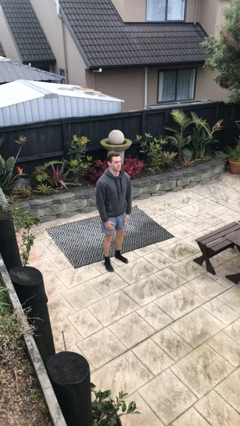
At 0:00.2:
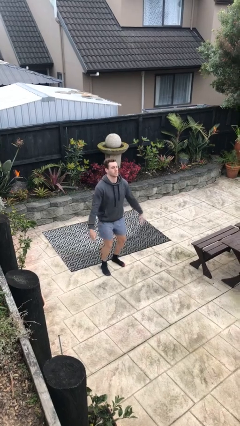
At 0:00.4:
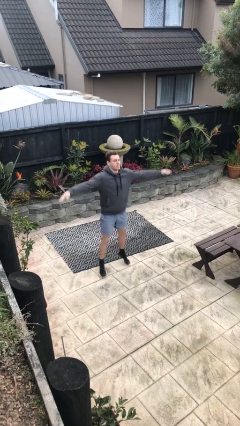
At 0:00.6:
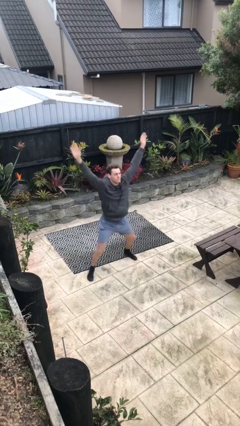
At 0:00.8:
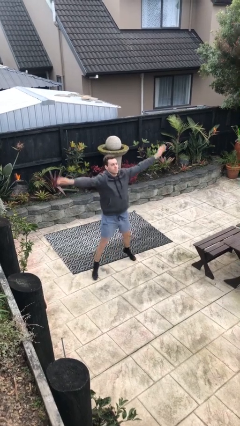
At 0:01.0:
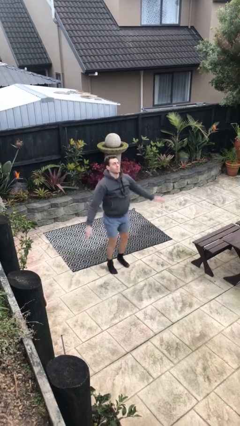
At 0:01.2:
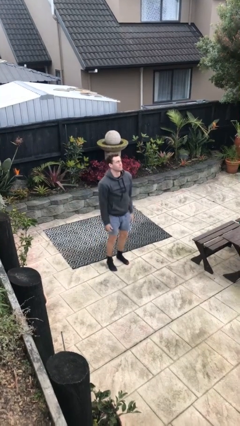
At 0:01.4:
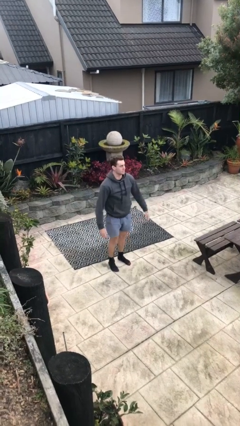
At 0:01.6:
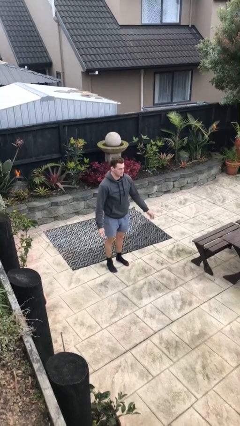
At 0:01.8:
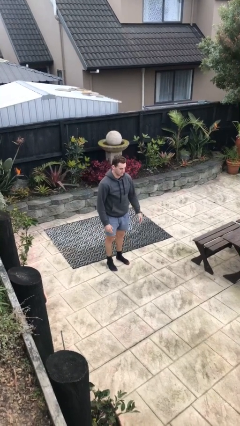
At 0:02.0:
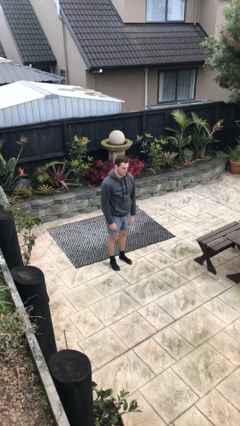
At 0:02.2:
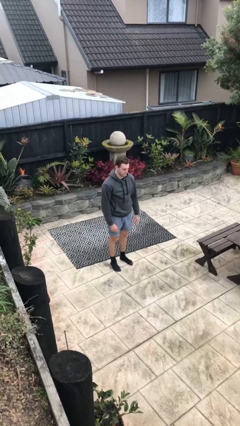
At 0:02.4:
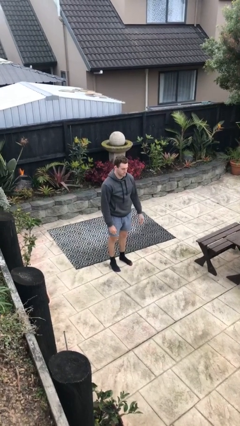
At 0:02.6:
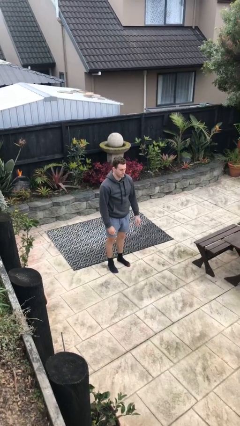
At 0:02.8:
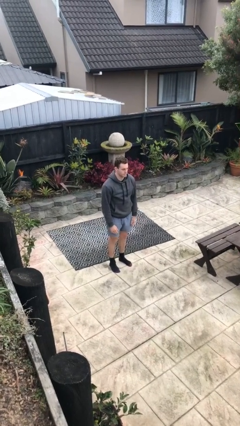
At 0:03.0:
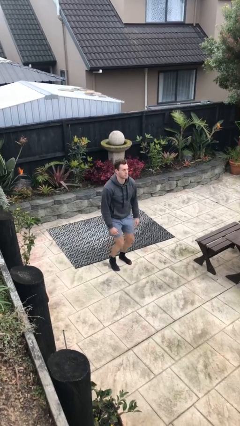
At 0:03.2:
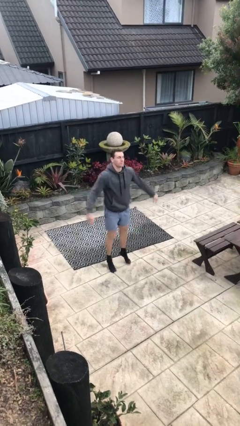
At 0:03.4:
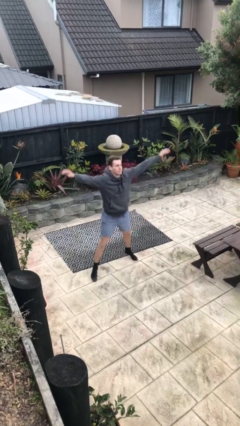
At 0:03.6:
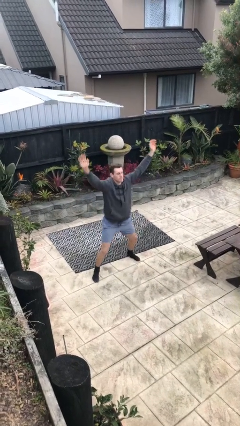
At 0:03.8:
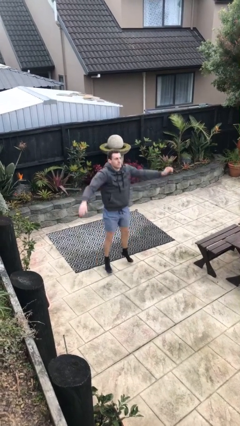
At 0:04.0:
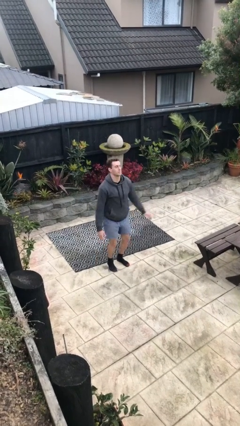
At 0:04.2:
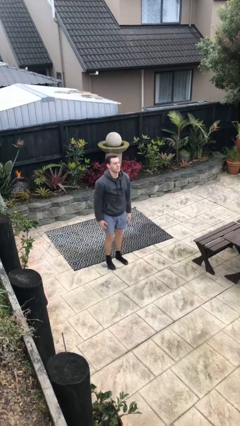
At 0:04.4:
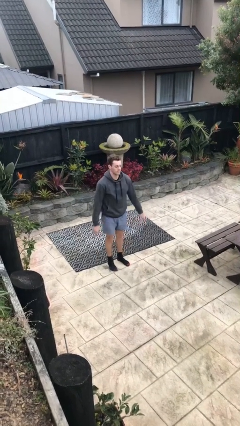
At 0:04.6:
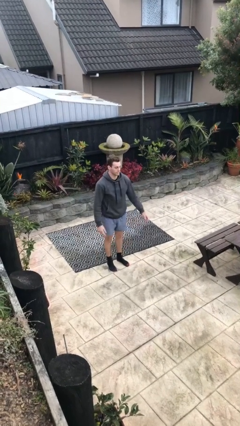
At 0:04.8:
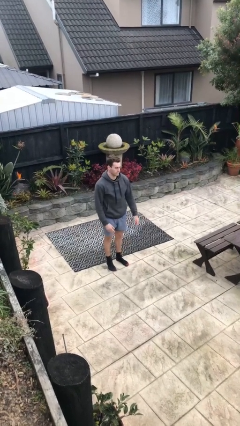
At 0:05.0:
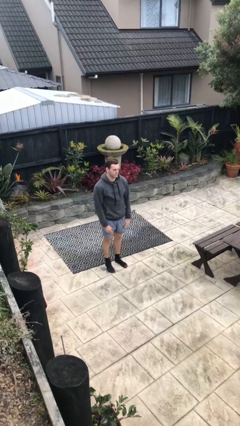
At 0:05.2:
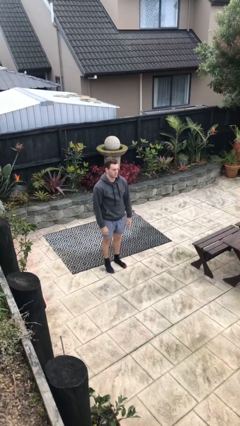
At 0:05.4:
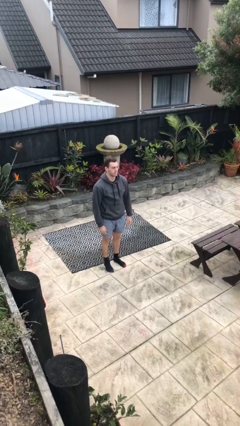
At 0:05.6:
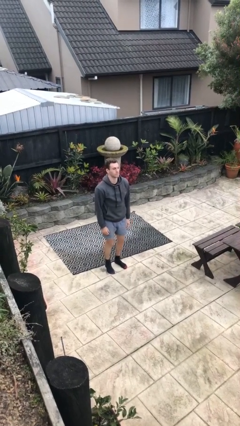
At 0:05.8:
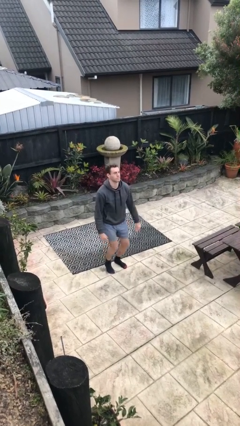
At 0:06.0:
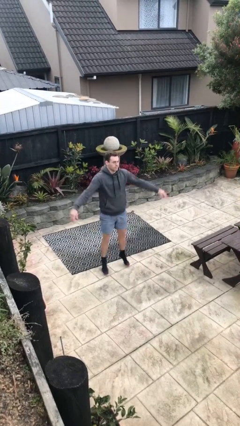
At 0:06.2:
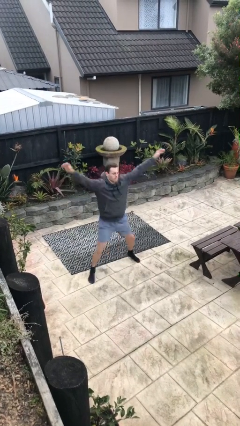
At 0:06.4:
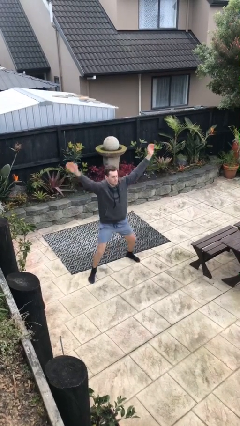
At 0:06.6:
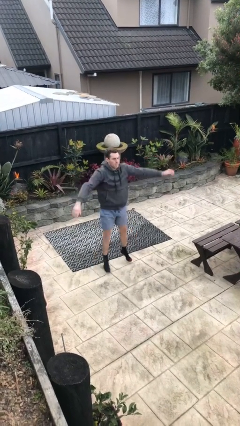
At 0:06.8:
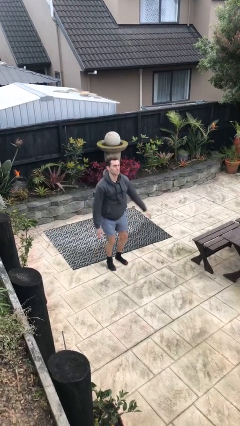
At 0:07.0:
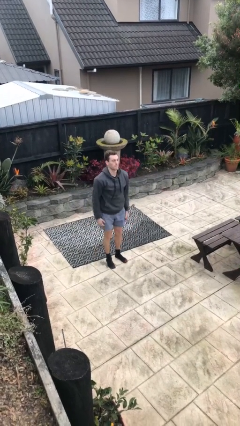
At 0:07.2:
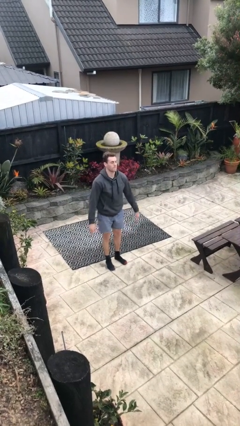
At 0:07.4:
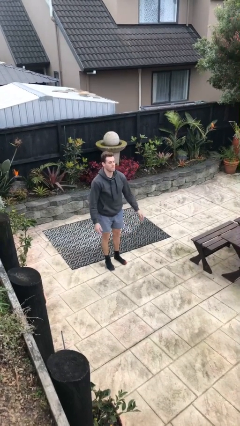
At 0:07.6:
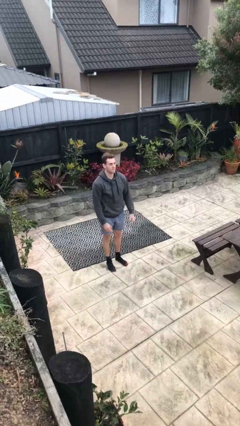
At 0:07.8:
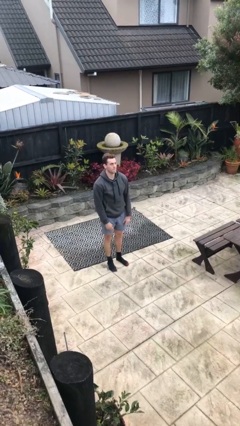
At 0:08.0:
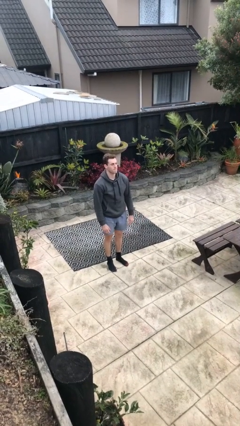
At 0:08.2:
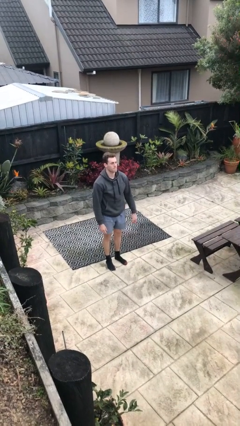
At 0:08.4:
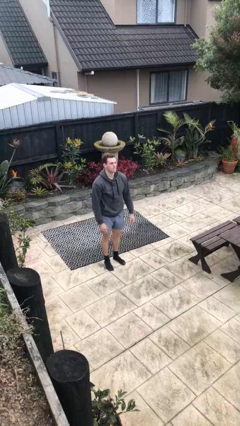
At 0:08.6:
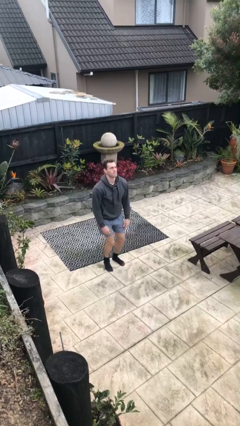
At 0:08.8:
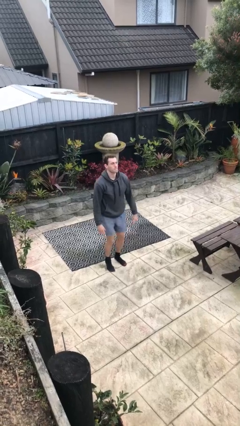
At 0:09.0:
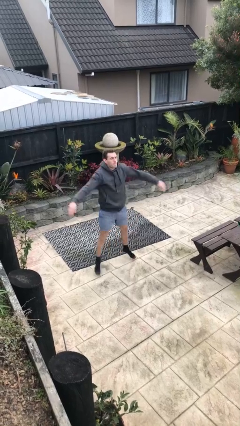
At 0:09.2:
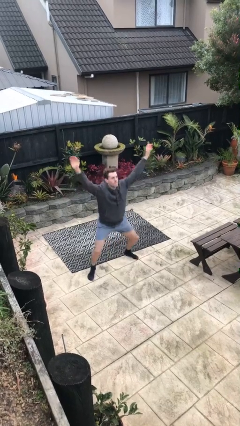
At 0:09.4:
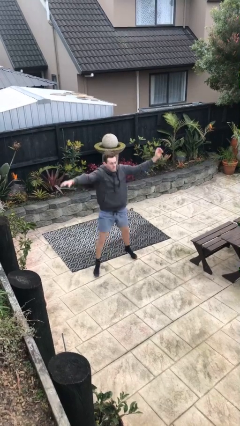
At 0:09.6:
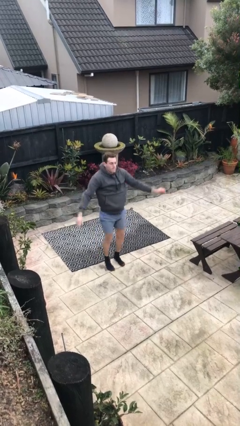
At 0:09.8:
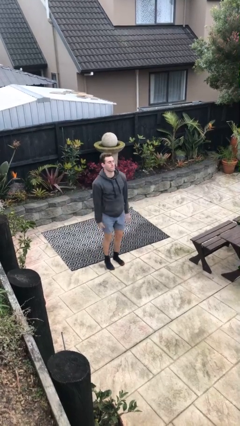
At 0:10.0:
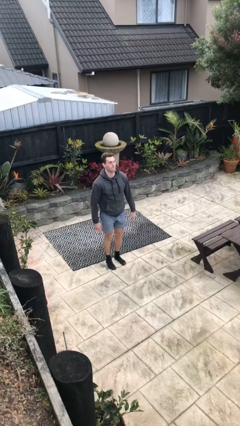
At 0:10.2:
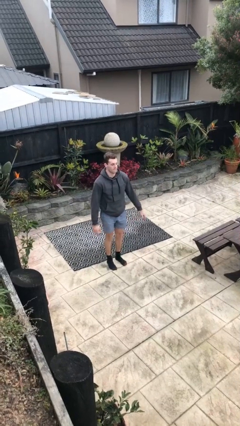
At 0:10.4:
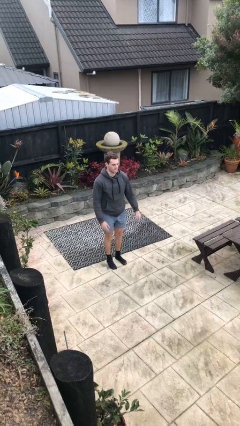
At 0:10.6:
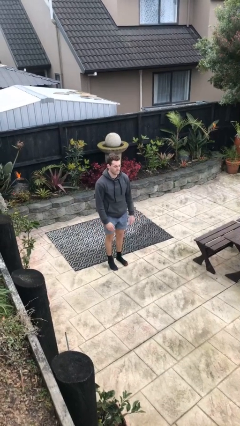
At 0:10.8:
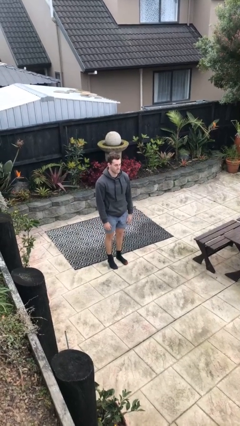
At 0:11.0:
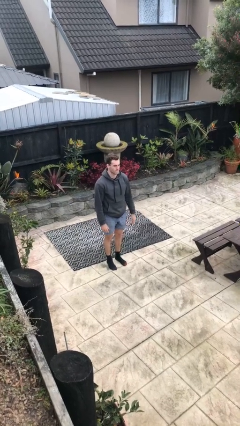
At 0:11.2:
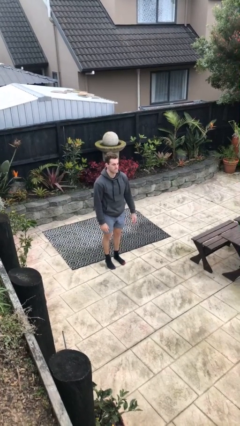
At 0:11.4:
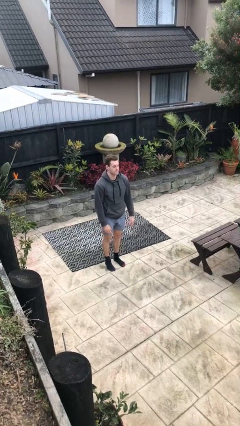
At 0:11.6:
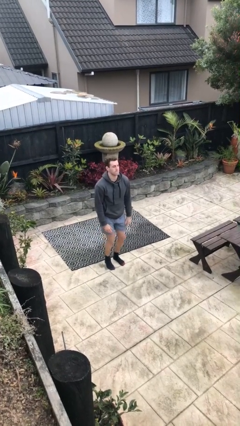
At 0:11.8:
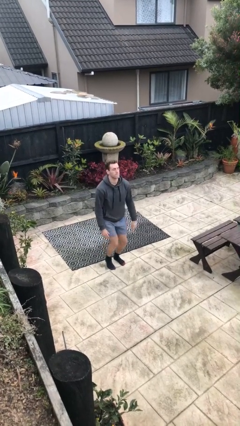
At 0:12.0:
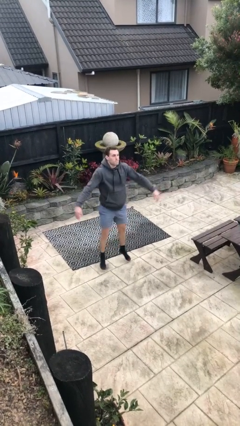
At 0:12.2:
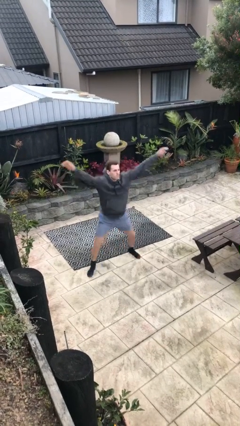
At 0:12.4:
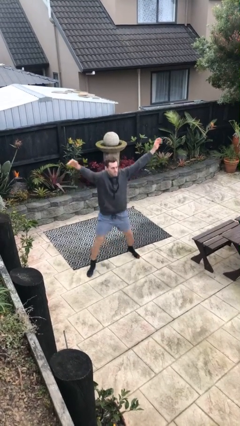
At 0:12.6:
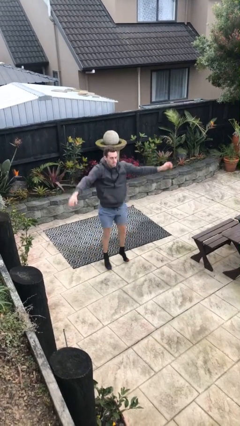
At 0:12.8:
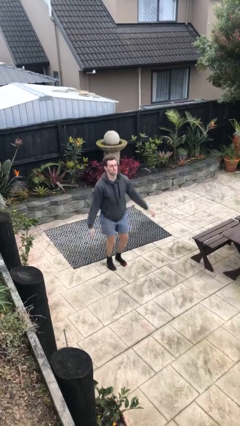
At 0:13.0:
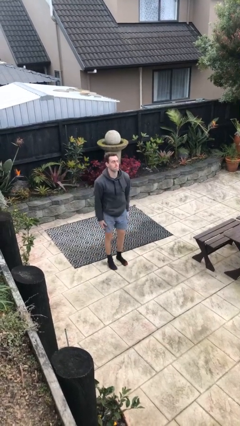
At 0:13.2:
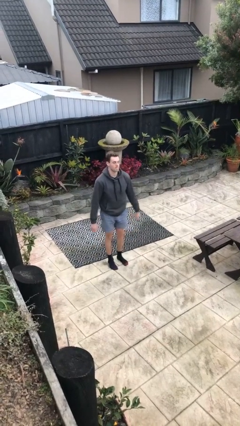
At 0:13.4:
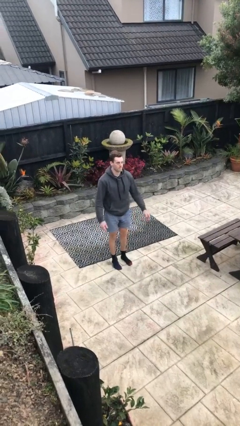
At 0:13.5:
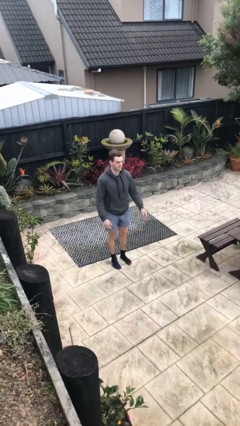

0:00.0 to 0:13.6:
person exercises with jumping jacks

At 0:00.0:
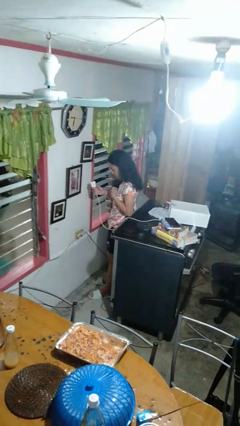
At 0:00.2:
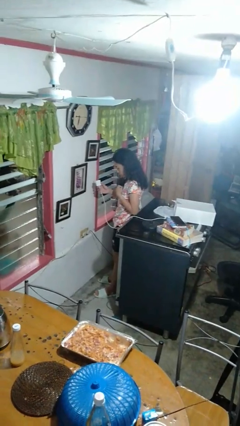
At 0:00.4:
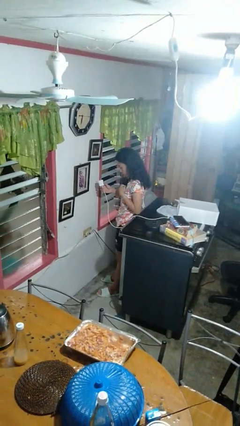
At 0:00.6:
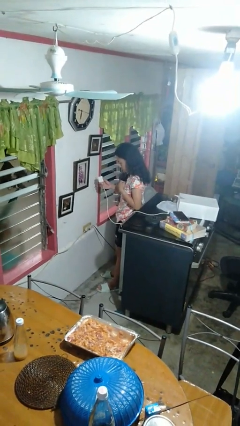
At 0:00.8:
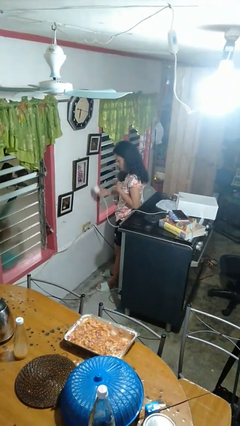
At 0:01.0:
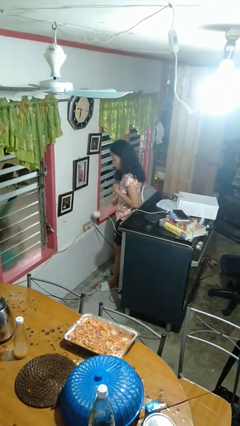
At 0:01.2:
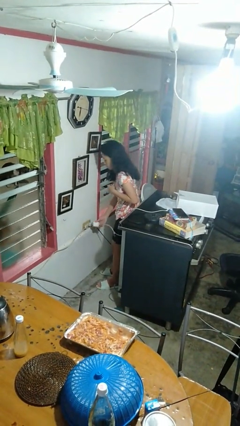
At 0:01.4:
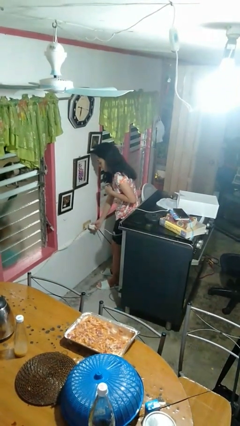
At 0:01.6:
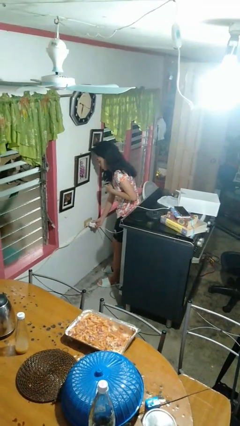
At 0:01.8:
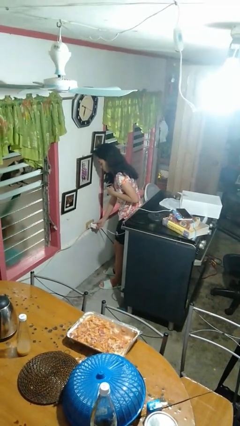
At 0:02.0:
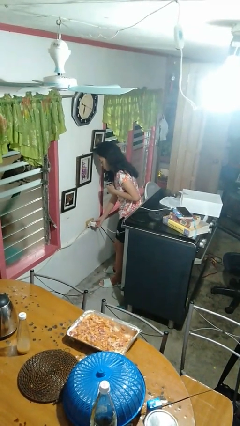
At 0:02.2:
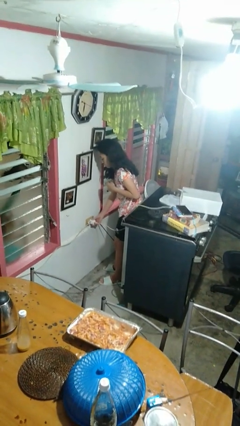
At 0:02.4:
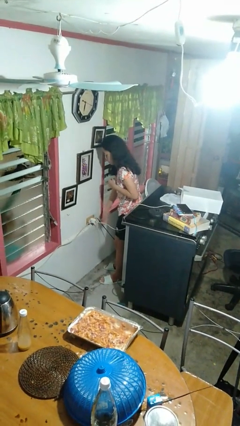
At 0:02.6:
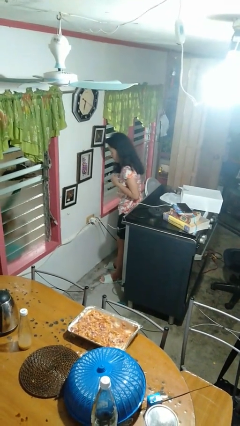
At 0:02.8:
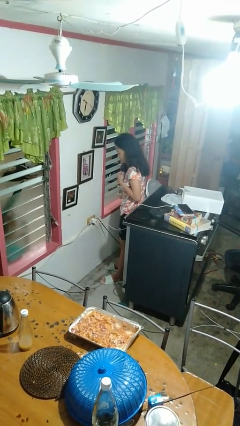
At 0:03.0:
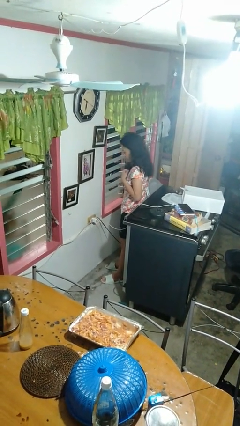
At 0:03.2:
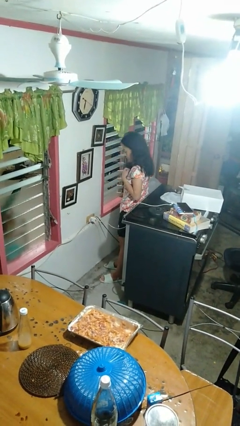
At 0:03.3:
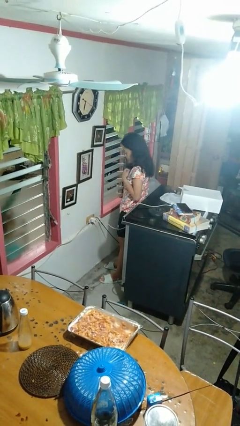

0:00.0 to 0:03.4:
person plugs into electrical socket

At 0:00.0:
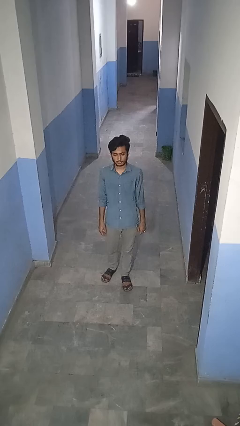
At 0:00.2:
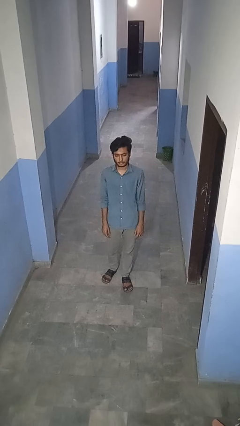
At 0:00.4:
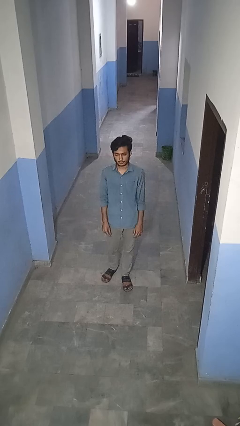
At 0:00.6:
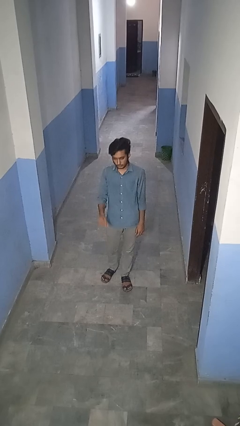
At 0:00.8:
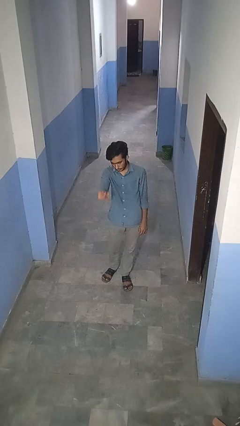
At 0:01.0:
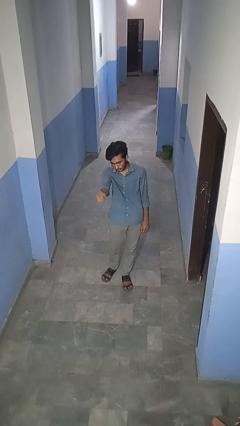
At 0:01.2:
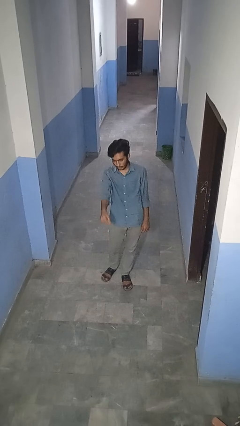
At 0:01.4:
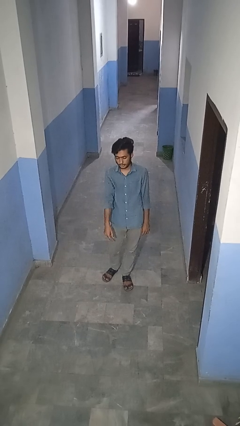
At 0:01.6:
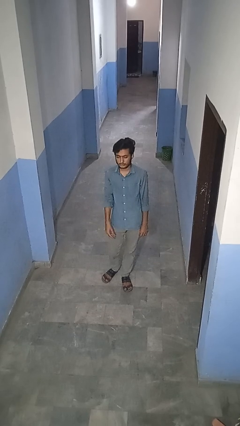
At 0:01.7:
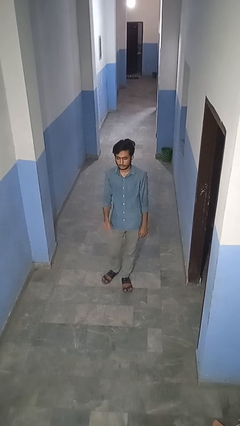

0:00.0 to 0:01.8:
person snaps fingers
